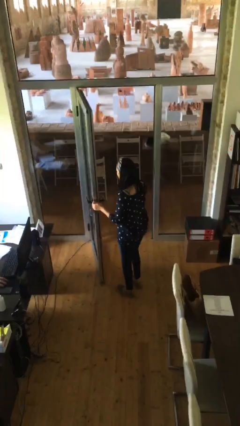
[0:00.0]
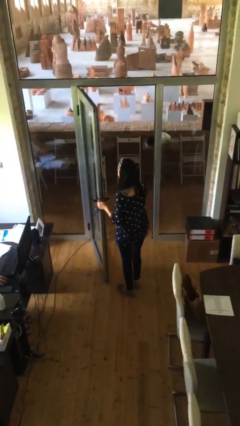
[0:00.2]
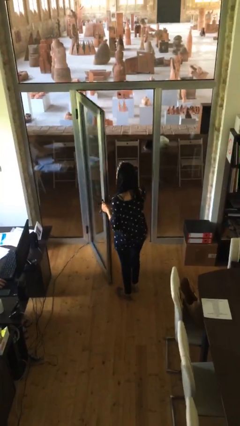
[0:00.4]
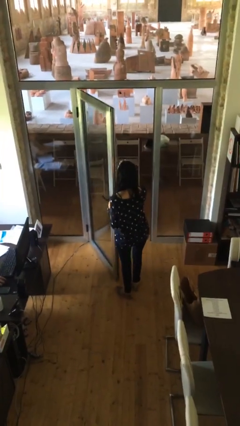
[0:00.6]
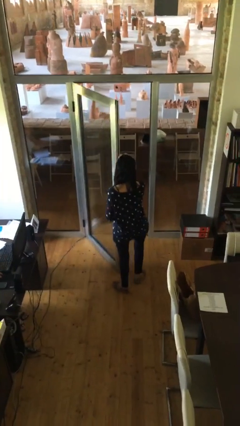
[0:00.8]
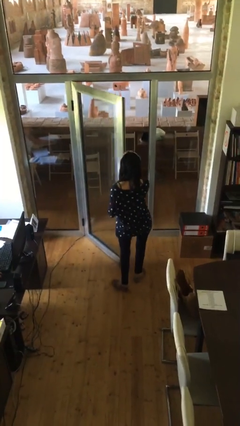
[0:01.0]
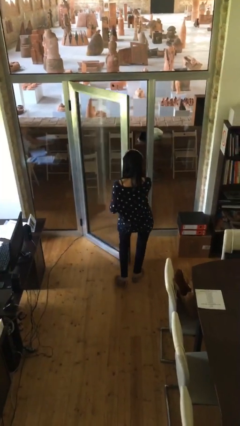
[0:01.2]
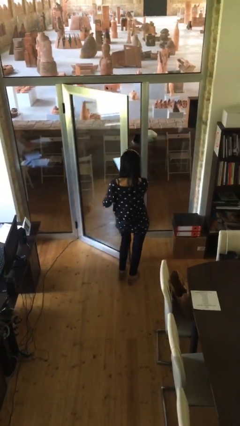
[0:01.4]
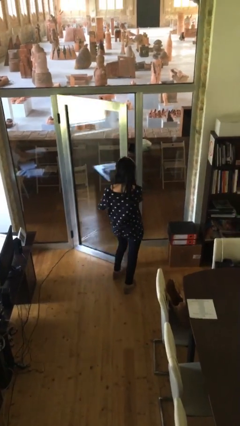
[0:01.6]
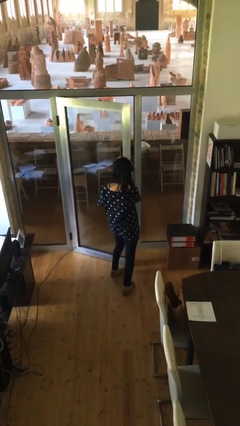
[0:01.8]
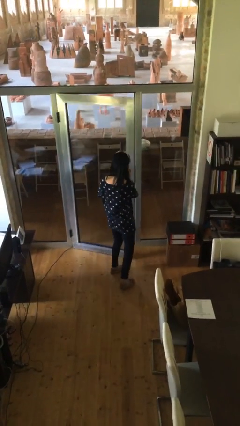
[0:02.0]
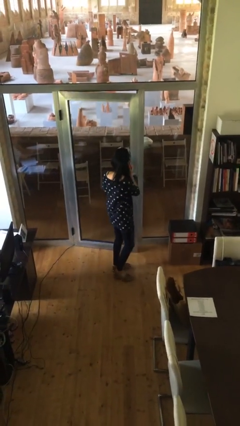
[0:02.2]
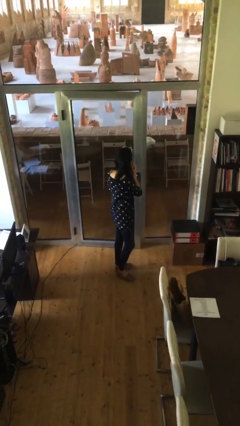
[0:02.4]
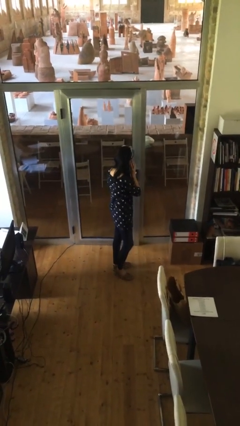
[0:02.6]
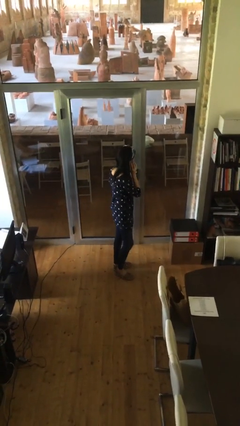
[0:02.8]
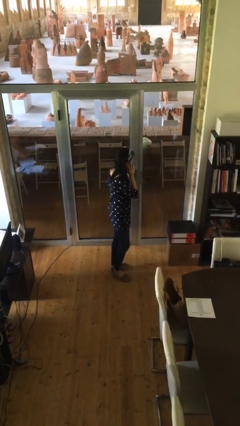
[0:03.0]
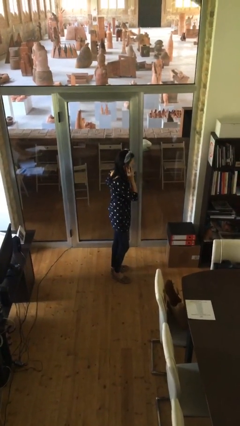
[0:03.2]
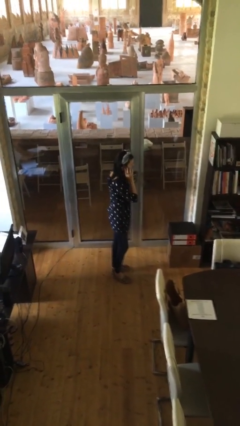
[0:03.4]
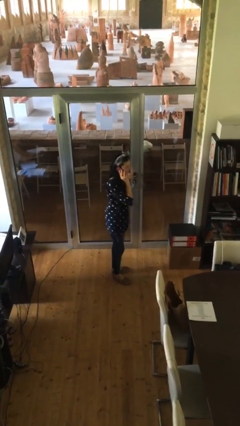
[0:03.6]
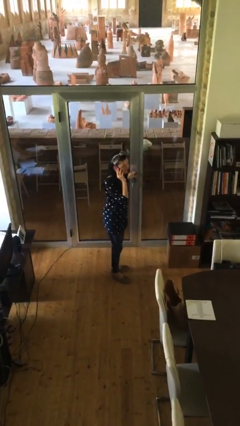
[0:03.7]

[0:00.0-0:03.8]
person closes facility door

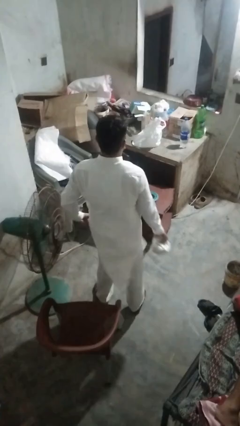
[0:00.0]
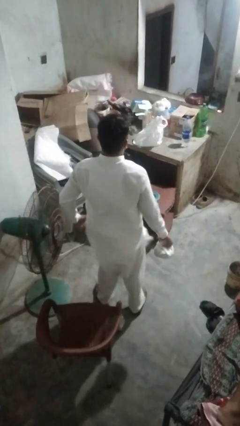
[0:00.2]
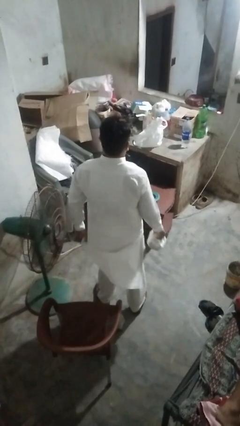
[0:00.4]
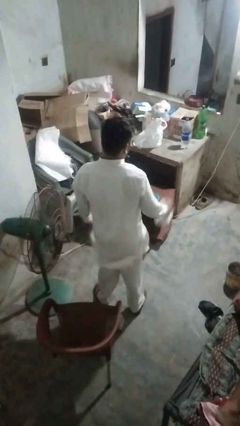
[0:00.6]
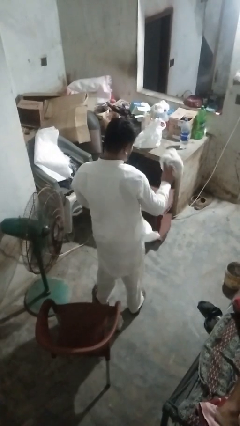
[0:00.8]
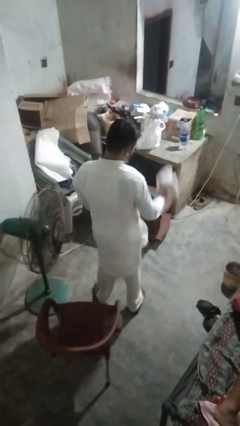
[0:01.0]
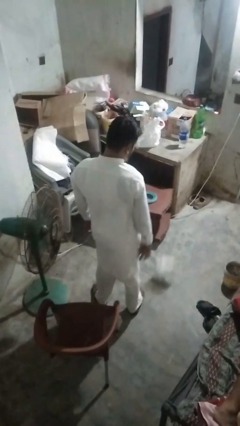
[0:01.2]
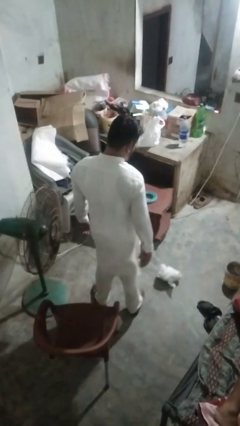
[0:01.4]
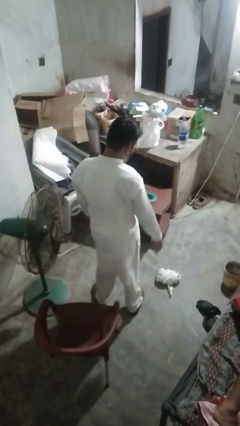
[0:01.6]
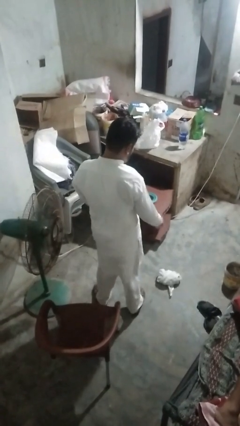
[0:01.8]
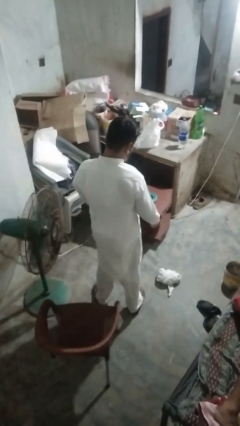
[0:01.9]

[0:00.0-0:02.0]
person throws object to ground

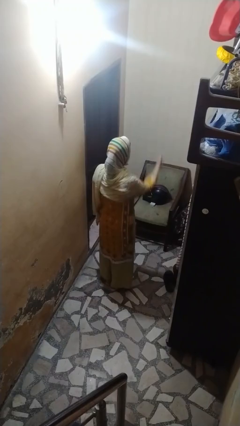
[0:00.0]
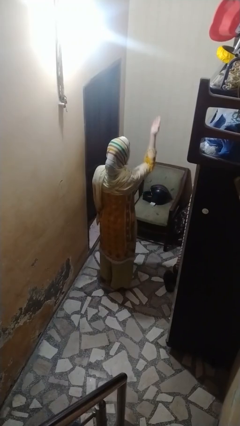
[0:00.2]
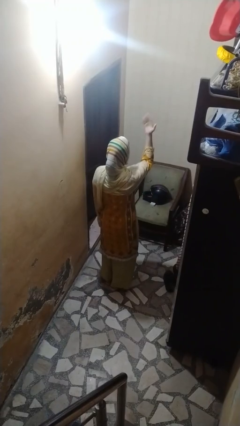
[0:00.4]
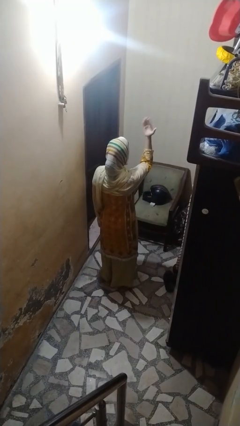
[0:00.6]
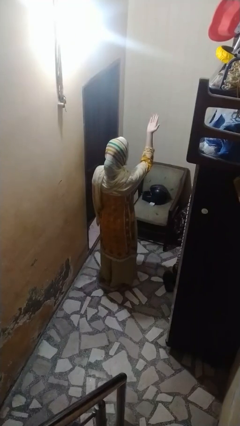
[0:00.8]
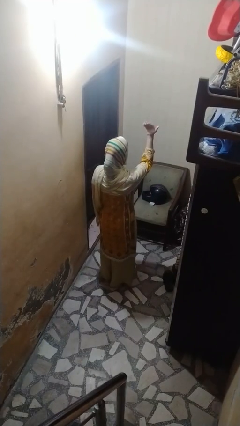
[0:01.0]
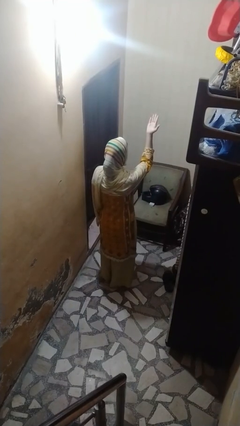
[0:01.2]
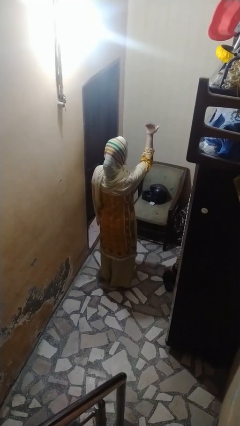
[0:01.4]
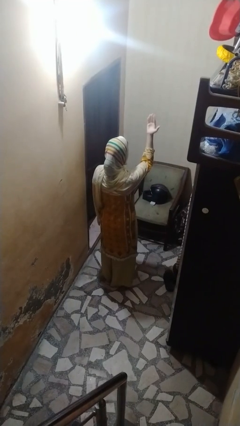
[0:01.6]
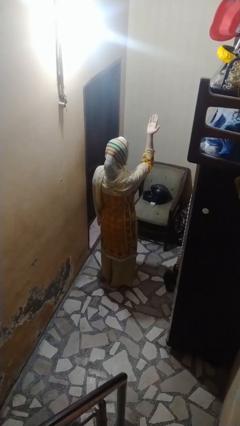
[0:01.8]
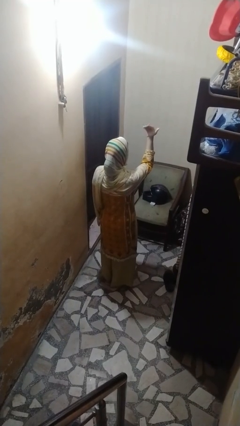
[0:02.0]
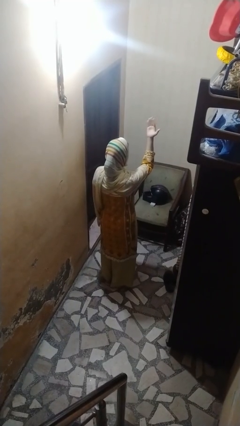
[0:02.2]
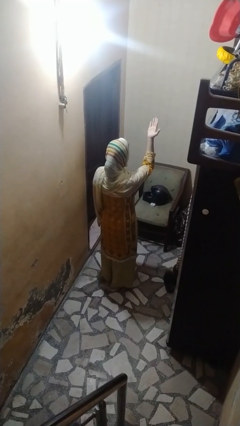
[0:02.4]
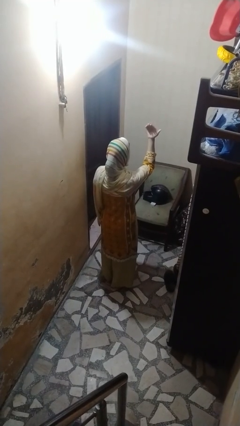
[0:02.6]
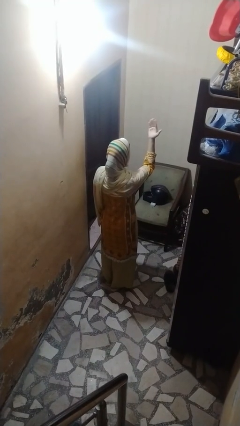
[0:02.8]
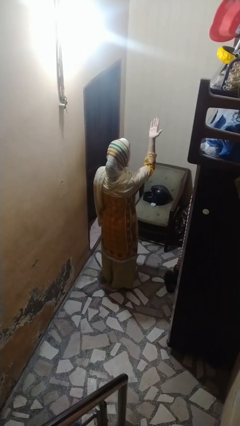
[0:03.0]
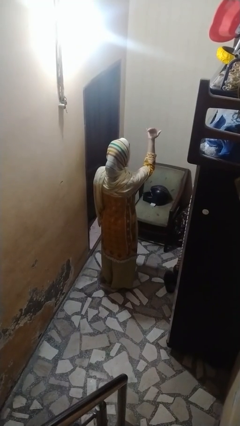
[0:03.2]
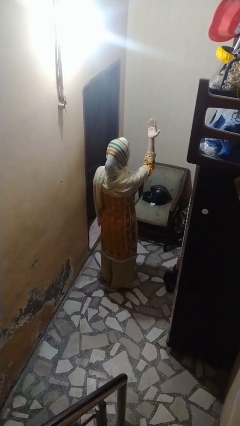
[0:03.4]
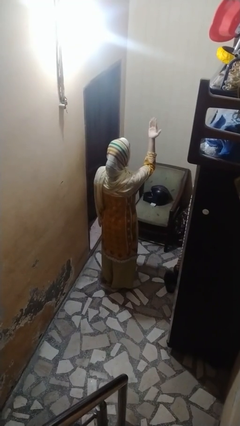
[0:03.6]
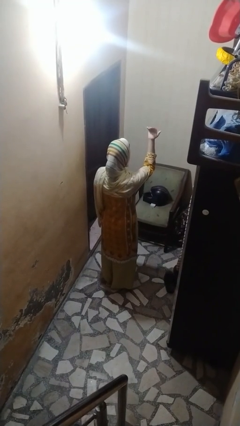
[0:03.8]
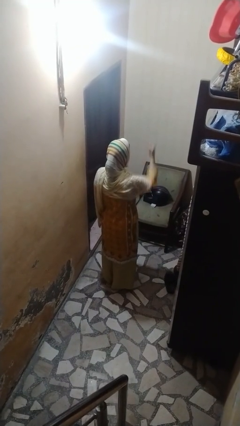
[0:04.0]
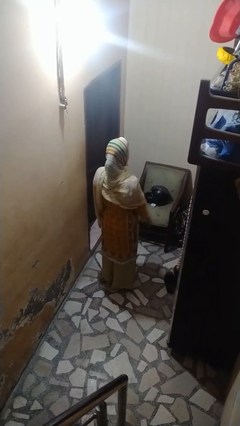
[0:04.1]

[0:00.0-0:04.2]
person gestures come here

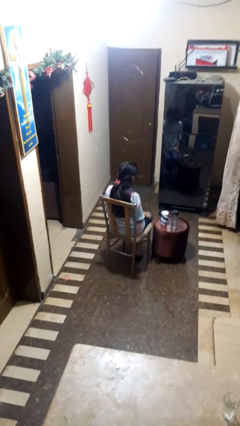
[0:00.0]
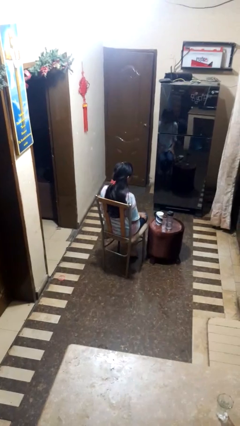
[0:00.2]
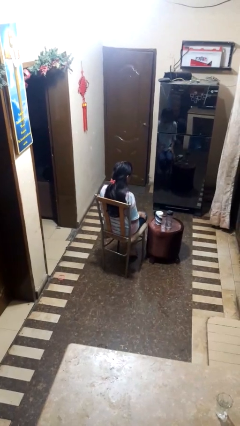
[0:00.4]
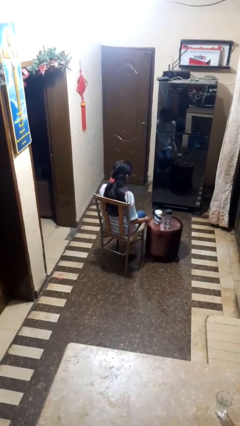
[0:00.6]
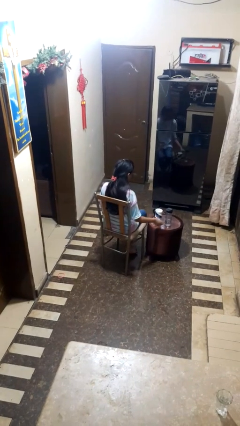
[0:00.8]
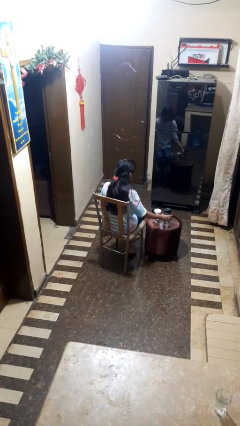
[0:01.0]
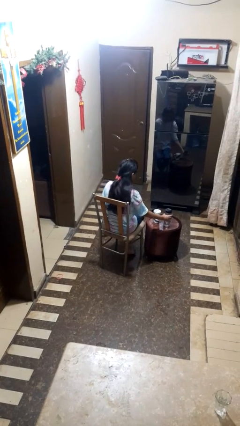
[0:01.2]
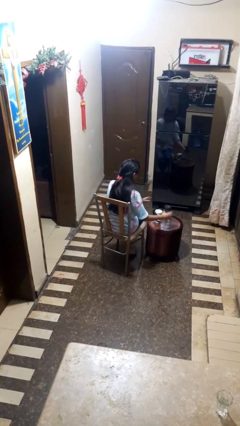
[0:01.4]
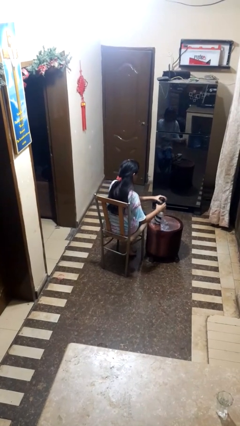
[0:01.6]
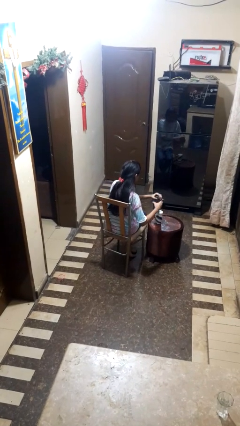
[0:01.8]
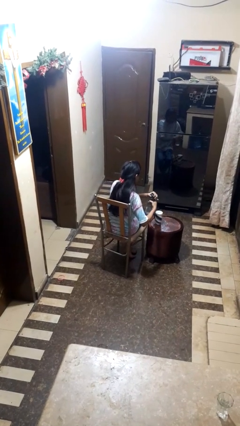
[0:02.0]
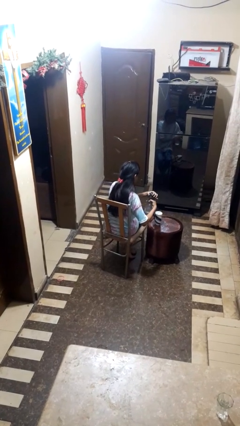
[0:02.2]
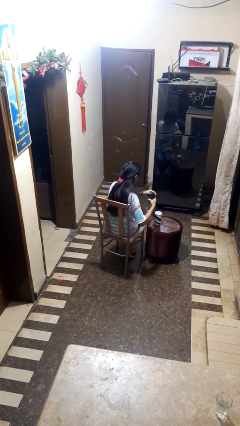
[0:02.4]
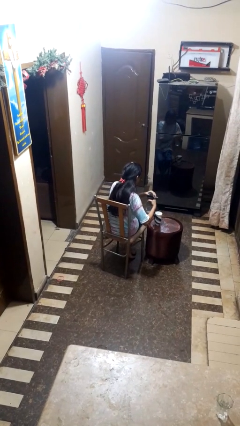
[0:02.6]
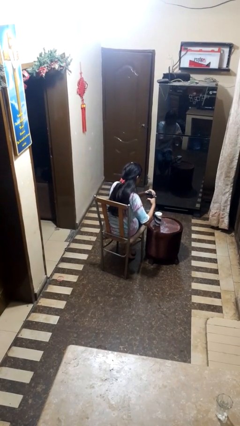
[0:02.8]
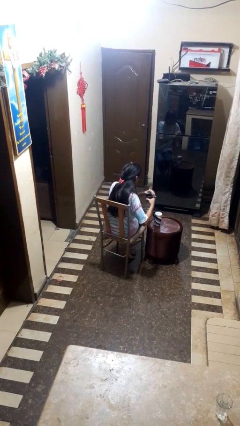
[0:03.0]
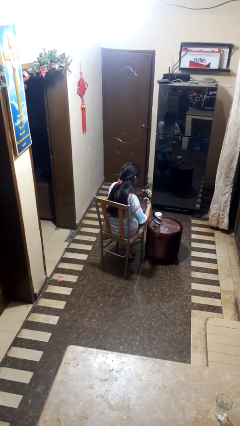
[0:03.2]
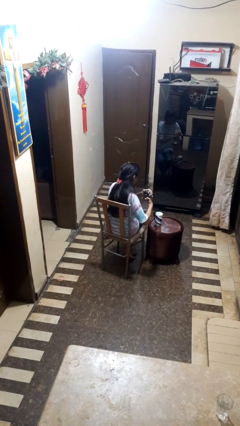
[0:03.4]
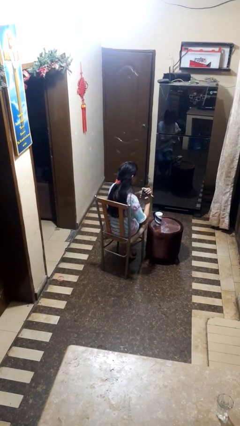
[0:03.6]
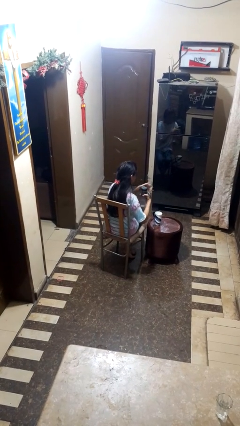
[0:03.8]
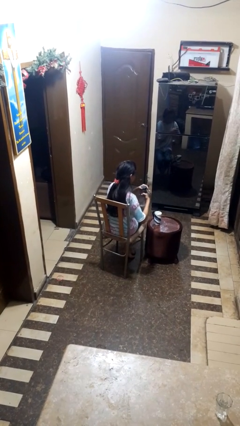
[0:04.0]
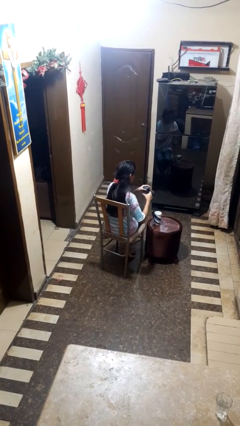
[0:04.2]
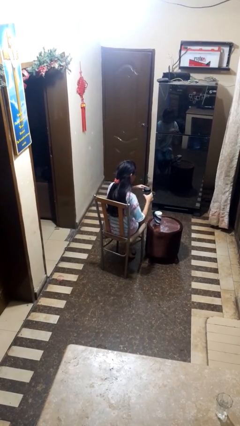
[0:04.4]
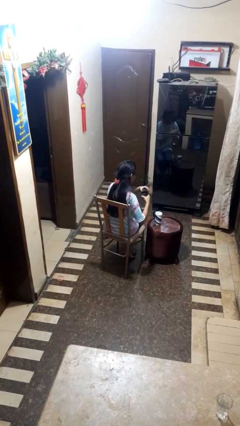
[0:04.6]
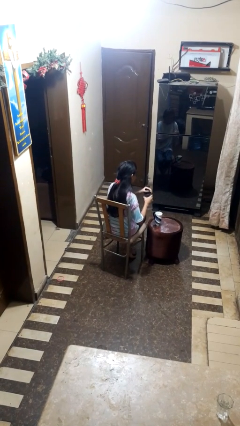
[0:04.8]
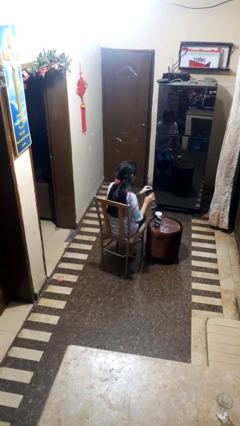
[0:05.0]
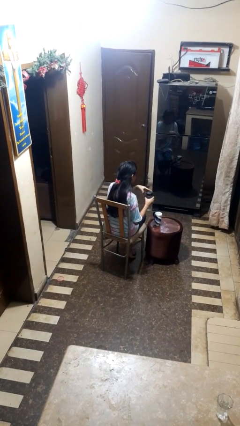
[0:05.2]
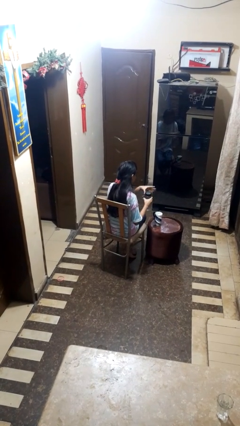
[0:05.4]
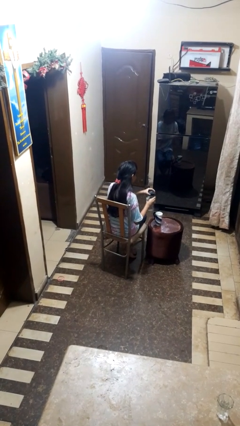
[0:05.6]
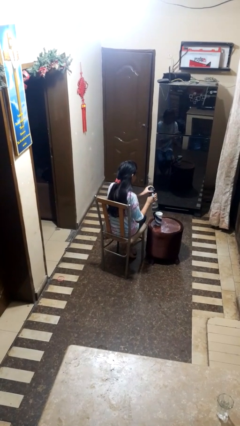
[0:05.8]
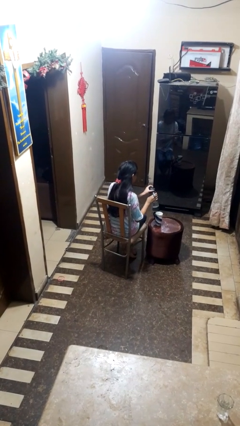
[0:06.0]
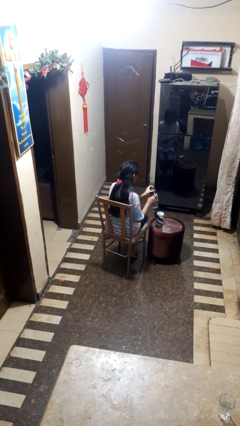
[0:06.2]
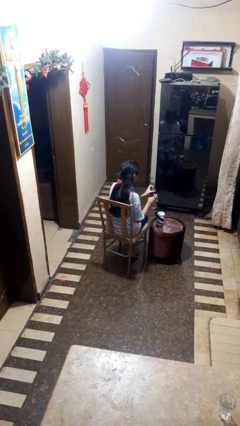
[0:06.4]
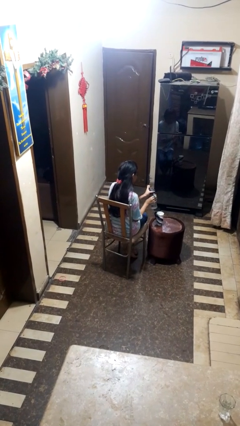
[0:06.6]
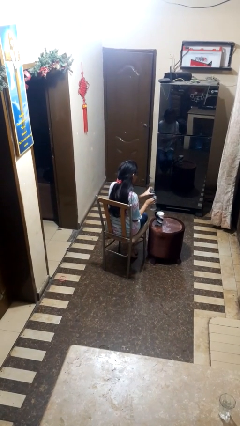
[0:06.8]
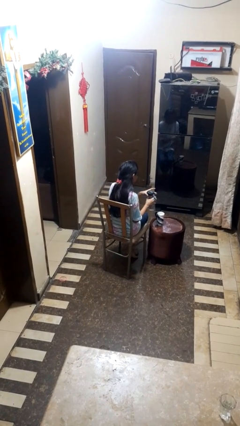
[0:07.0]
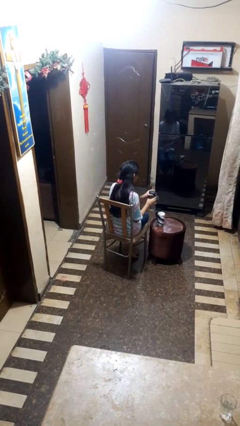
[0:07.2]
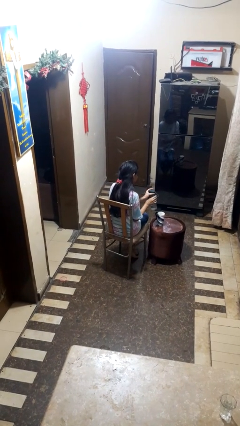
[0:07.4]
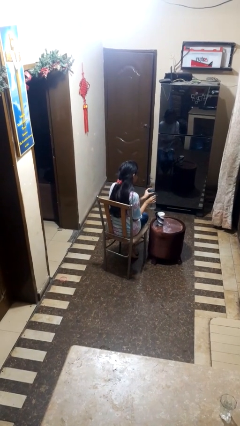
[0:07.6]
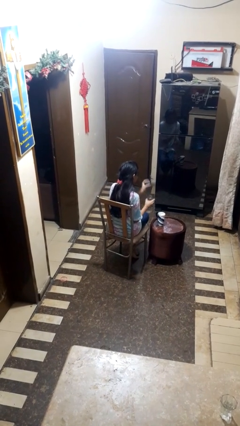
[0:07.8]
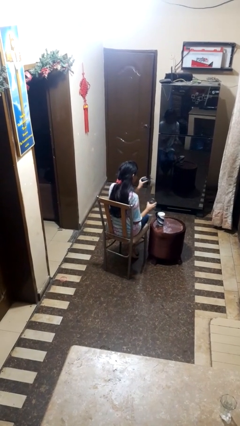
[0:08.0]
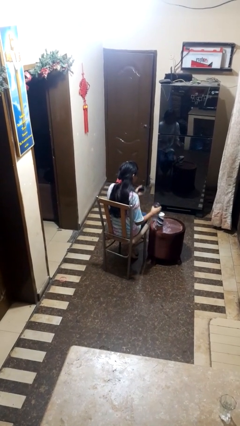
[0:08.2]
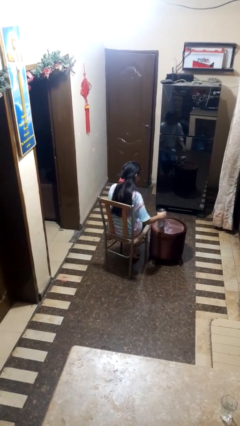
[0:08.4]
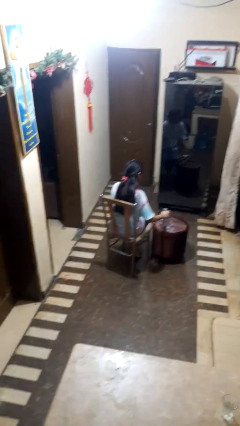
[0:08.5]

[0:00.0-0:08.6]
person unscrews lid from bottle
